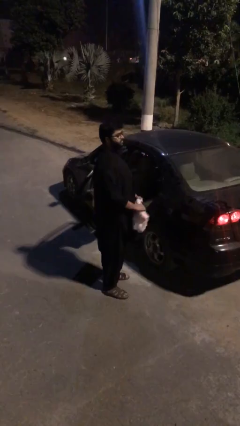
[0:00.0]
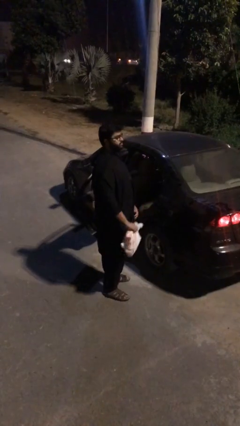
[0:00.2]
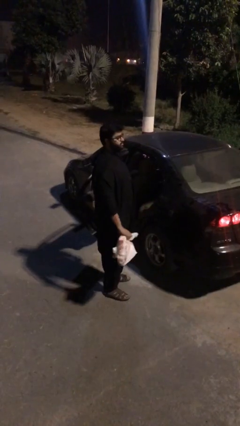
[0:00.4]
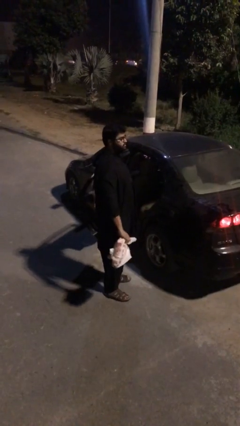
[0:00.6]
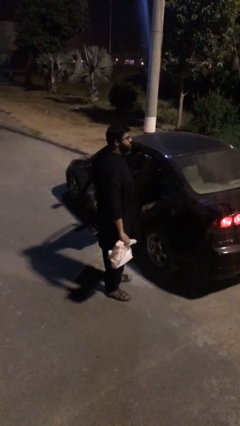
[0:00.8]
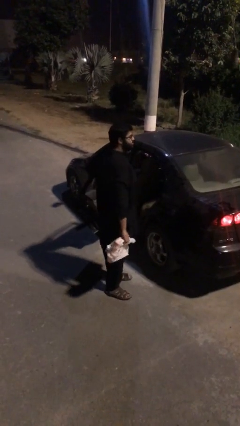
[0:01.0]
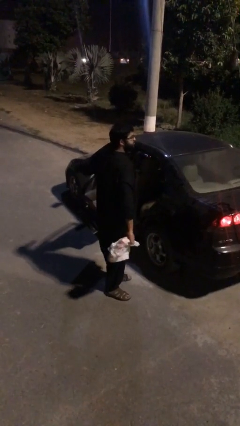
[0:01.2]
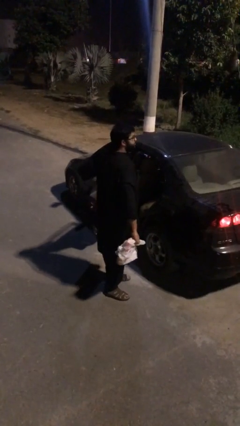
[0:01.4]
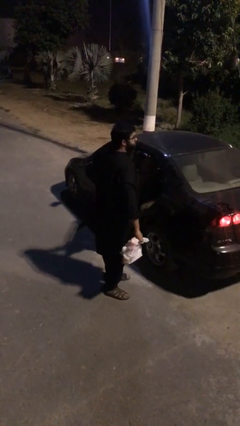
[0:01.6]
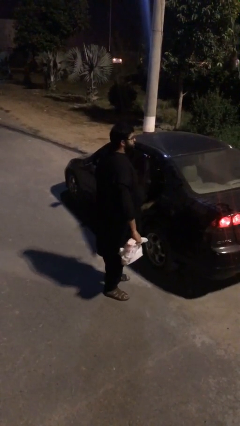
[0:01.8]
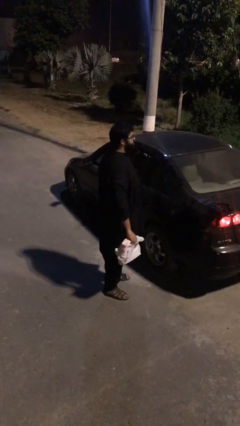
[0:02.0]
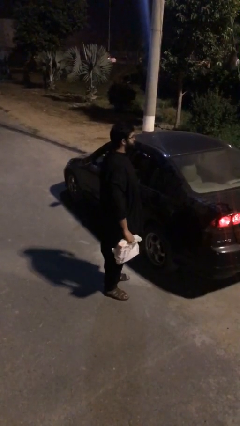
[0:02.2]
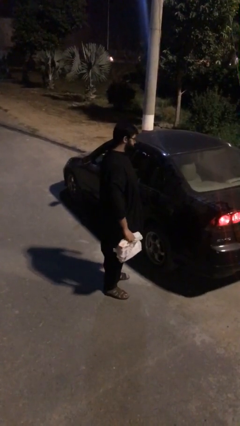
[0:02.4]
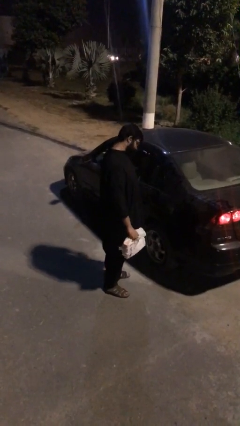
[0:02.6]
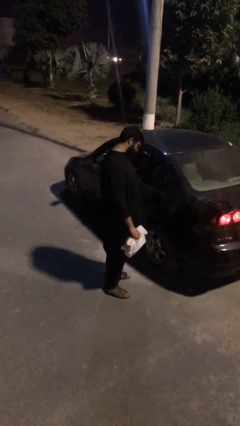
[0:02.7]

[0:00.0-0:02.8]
person closes car door

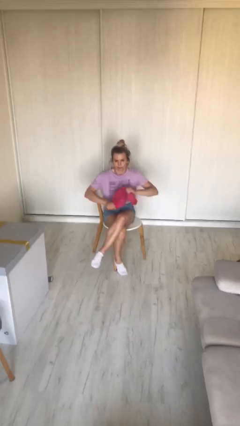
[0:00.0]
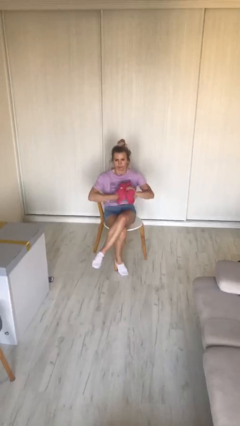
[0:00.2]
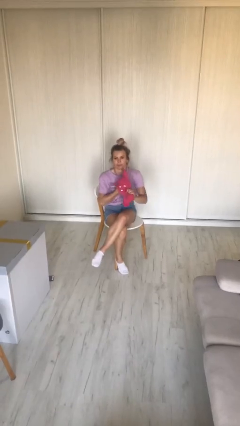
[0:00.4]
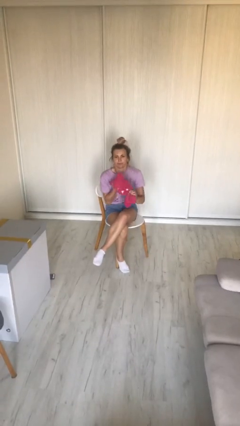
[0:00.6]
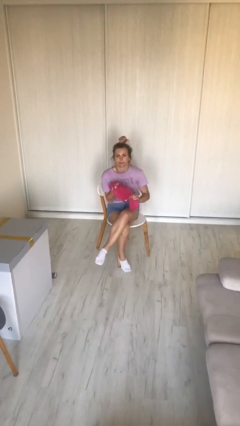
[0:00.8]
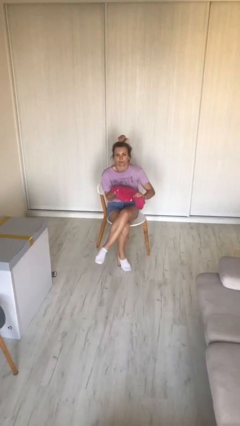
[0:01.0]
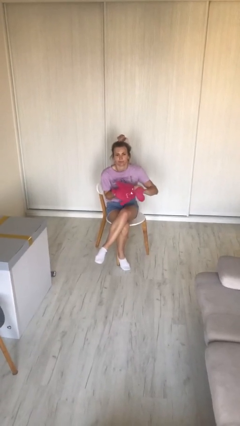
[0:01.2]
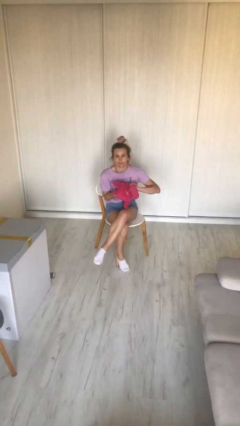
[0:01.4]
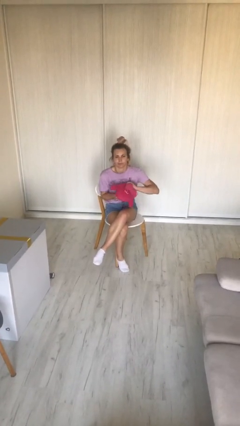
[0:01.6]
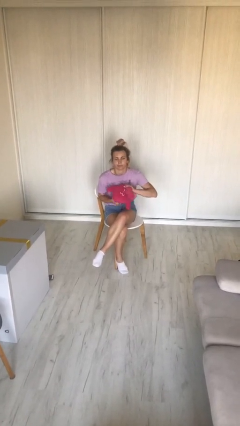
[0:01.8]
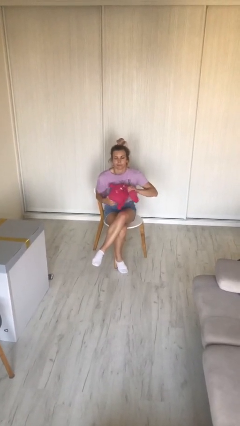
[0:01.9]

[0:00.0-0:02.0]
person squeezes object

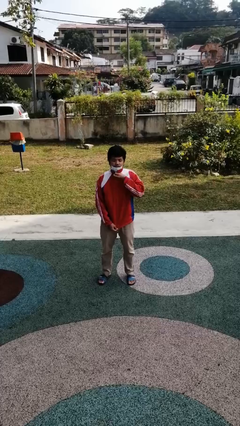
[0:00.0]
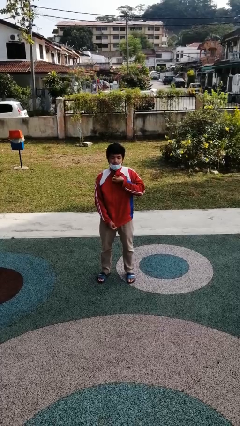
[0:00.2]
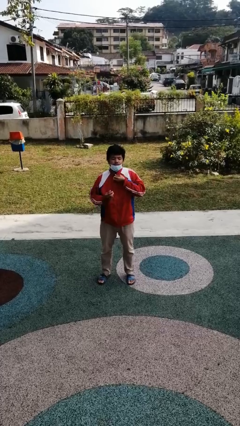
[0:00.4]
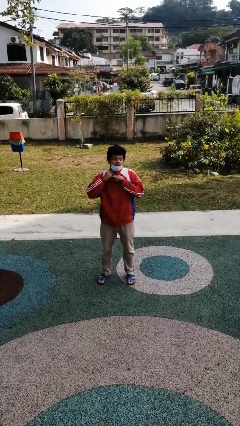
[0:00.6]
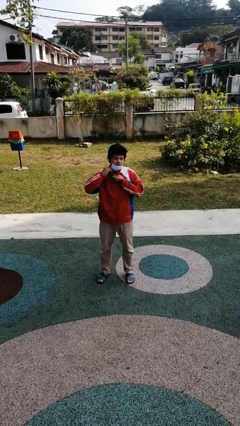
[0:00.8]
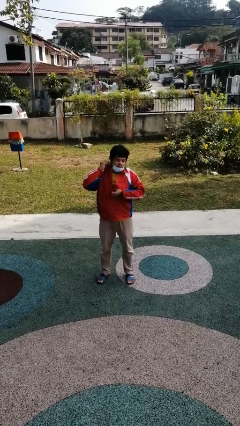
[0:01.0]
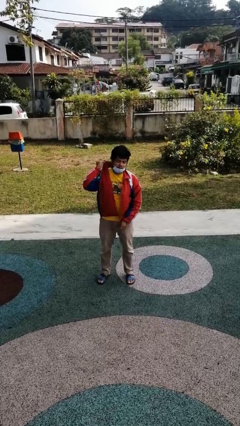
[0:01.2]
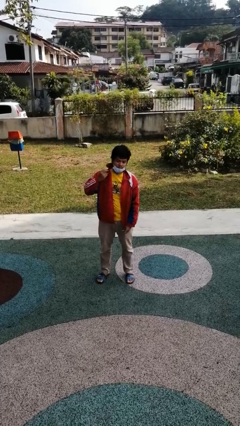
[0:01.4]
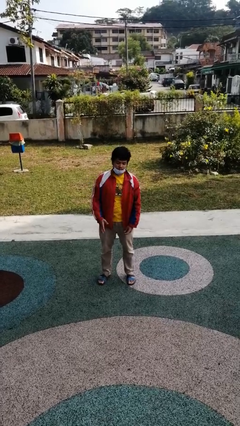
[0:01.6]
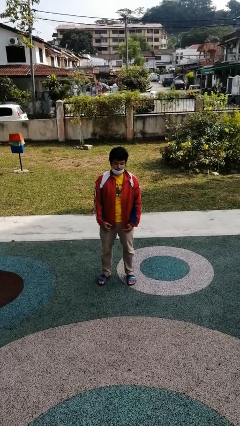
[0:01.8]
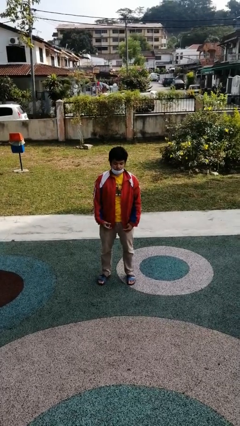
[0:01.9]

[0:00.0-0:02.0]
person unzips jacket

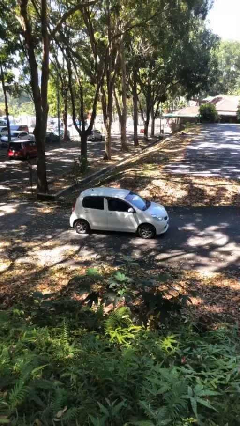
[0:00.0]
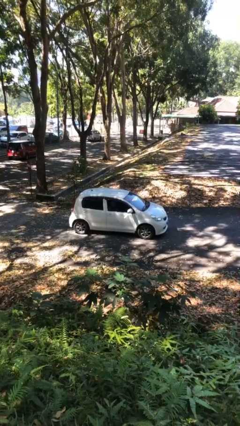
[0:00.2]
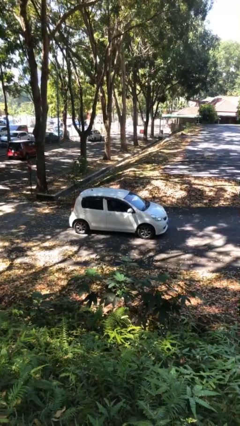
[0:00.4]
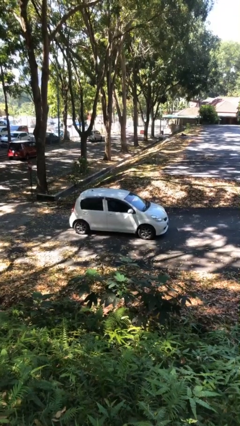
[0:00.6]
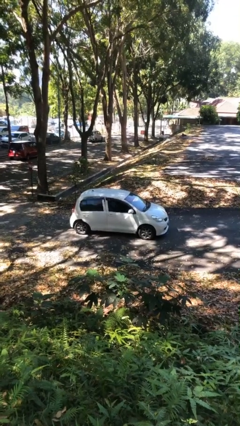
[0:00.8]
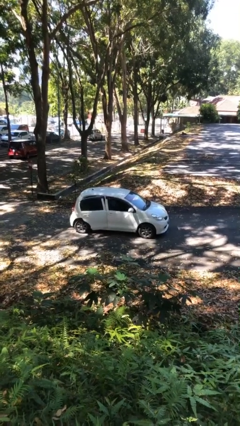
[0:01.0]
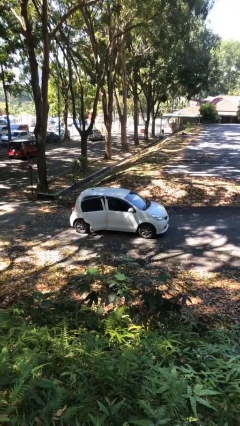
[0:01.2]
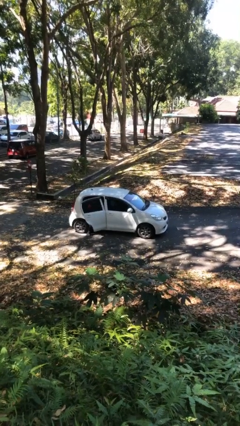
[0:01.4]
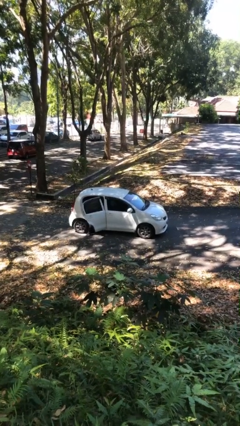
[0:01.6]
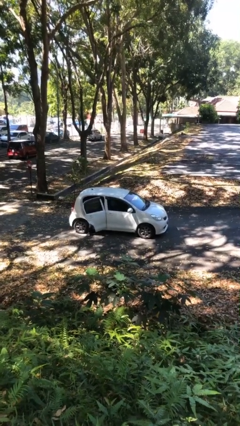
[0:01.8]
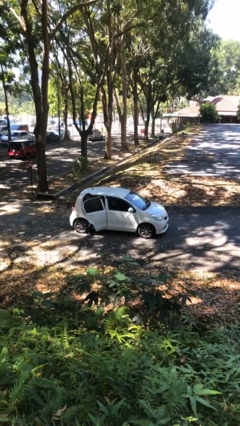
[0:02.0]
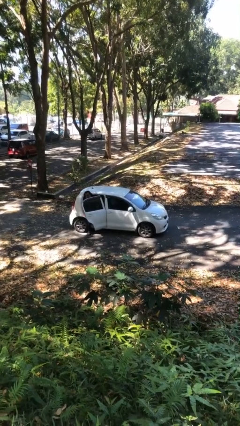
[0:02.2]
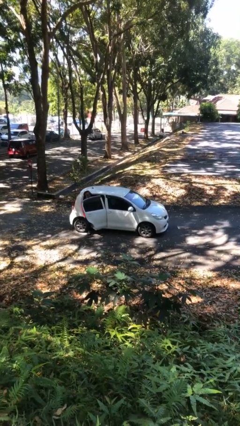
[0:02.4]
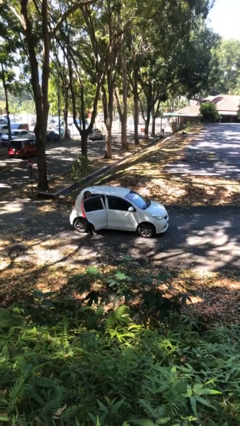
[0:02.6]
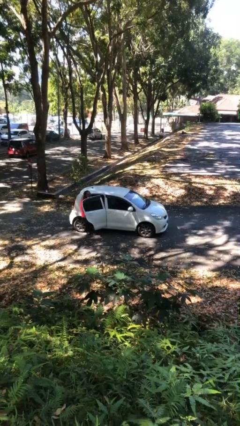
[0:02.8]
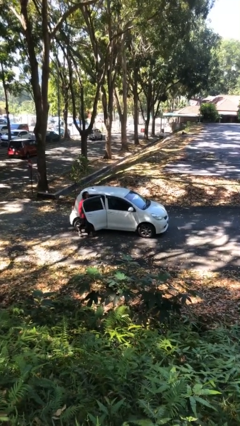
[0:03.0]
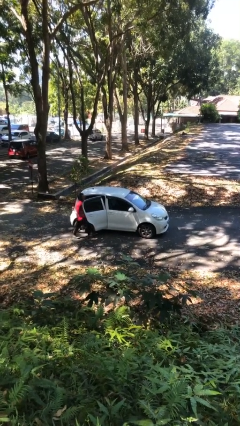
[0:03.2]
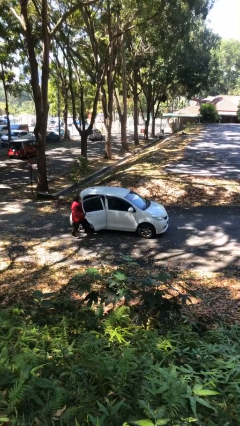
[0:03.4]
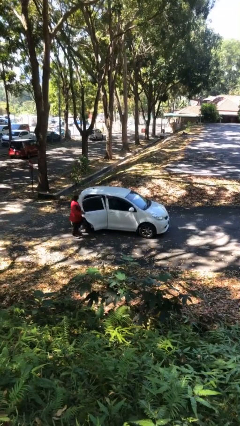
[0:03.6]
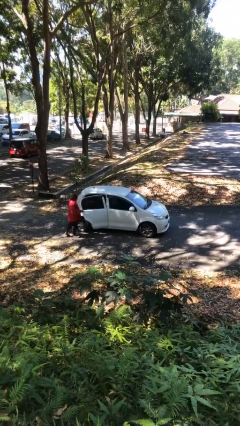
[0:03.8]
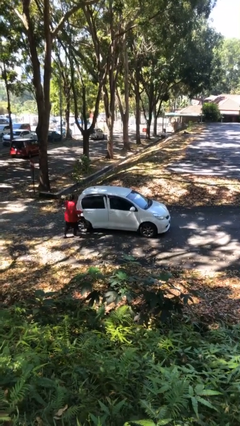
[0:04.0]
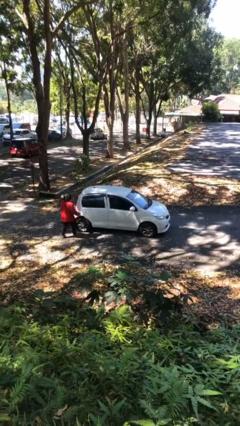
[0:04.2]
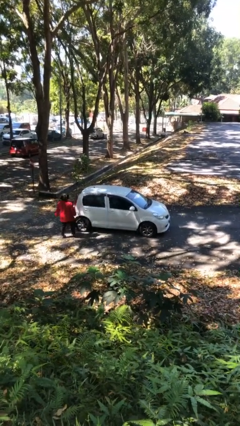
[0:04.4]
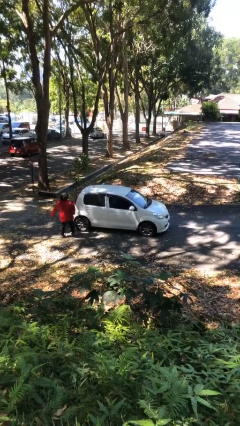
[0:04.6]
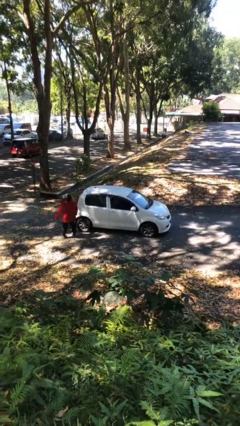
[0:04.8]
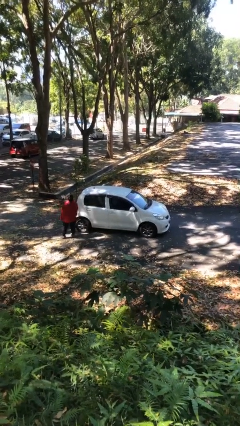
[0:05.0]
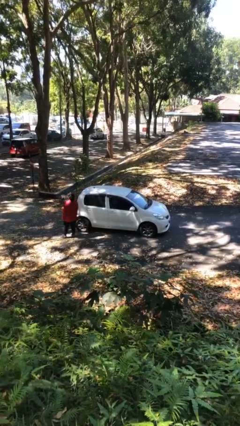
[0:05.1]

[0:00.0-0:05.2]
car drops off person

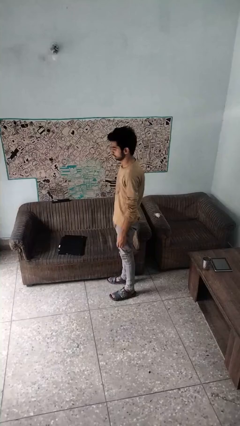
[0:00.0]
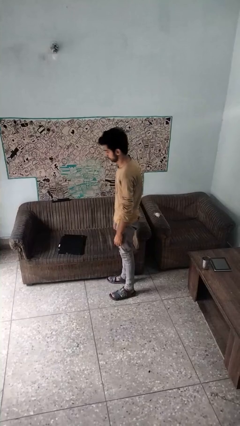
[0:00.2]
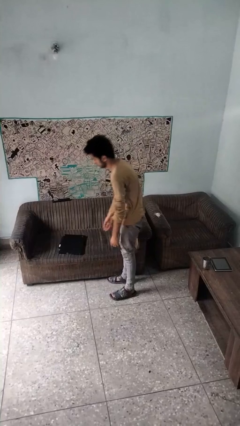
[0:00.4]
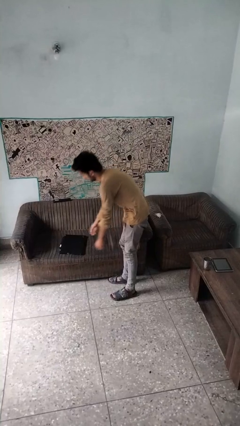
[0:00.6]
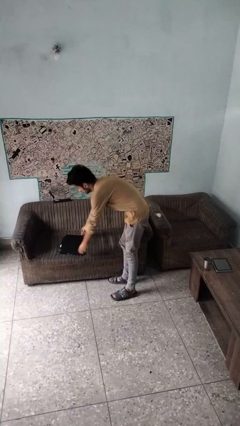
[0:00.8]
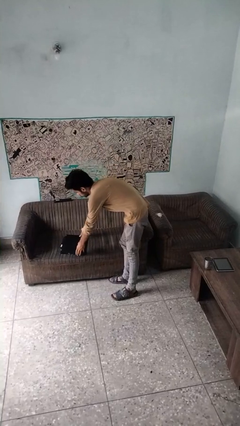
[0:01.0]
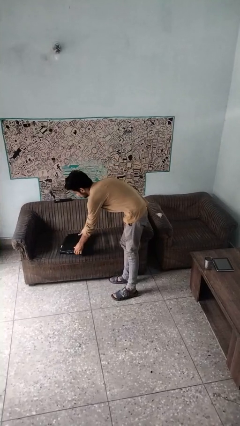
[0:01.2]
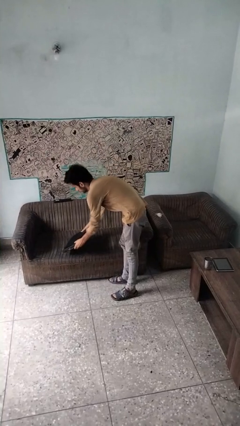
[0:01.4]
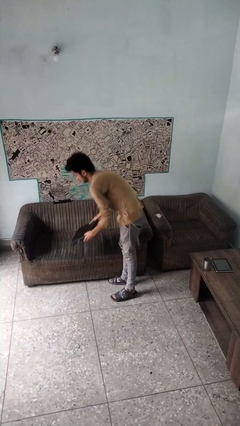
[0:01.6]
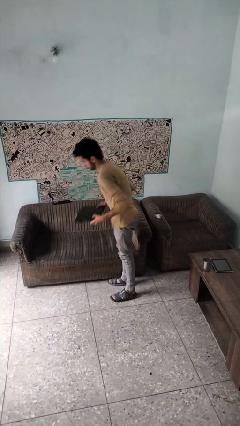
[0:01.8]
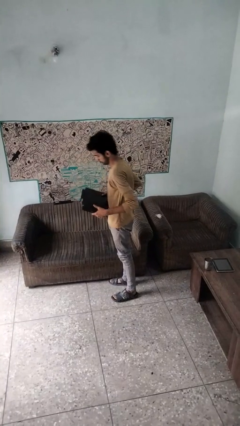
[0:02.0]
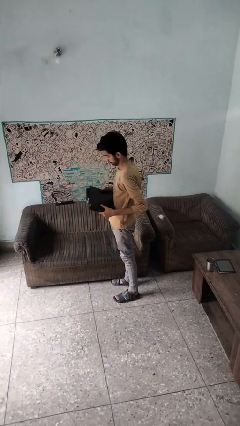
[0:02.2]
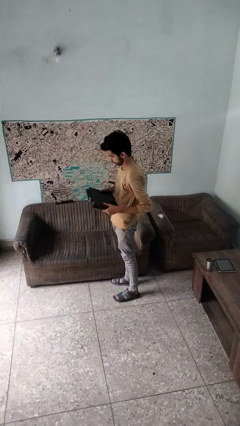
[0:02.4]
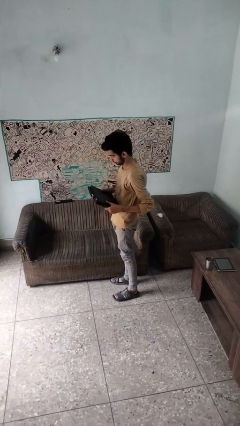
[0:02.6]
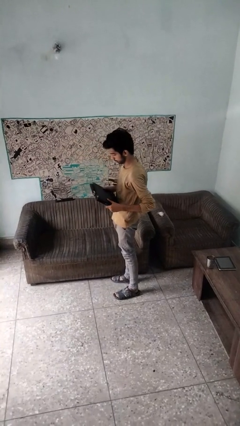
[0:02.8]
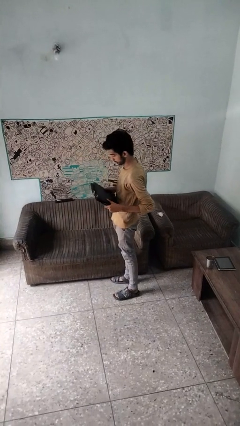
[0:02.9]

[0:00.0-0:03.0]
person picks up object from couch

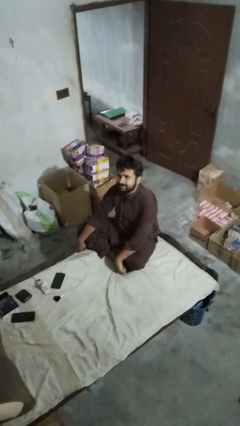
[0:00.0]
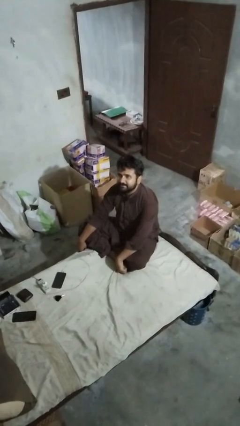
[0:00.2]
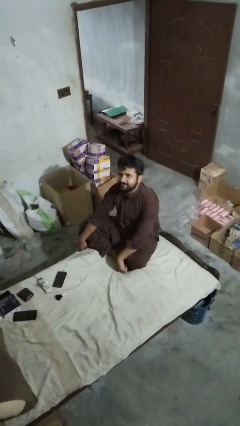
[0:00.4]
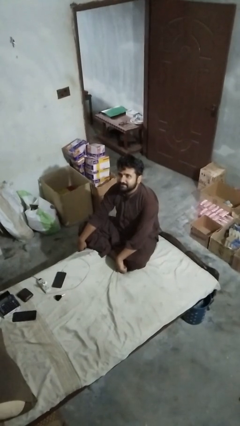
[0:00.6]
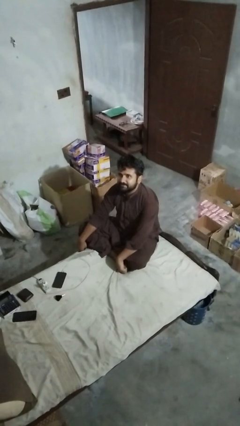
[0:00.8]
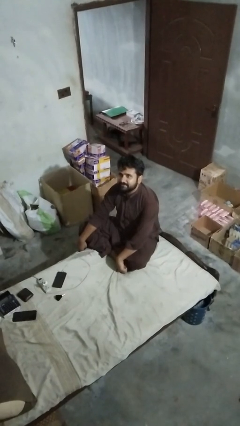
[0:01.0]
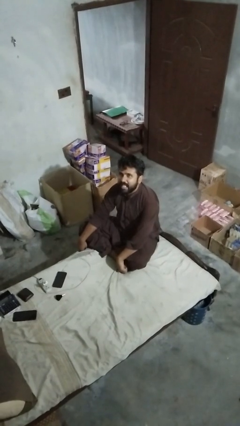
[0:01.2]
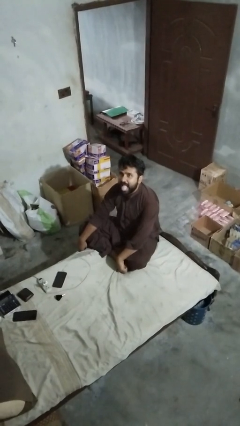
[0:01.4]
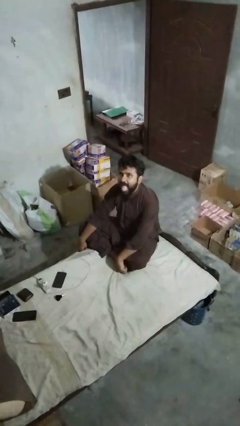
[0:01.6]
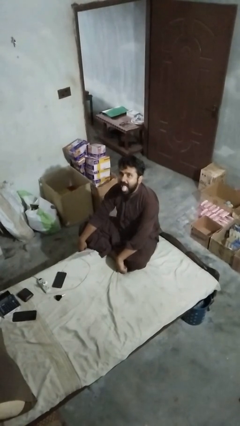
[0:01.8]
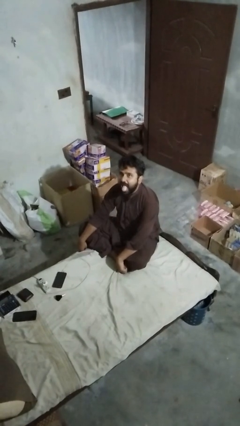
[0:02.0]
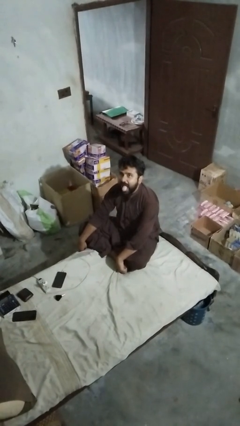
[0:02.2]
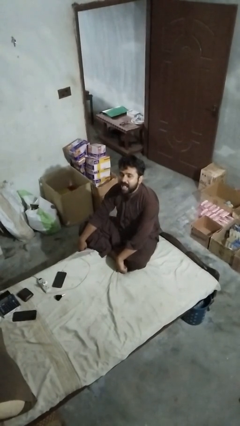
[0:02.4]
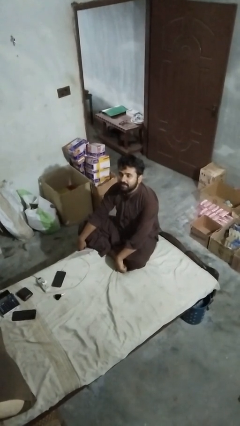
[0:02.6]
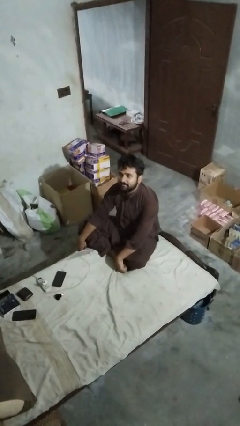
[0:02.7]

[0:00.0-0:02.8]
person sticks out tongue
